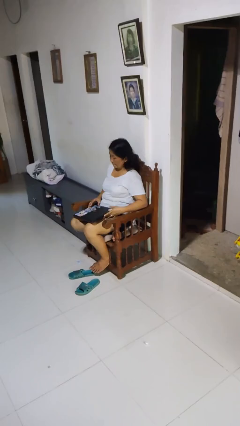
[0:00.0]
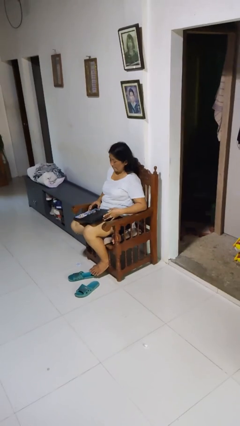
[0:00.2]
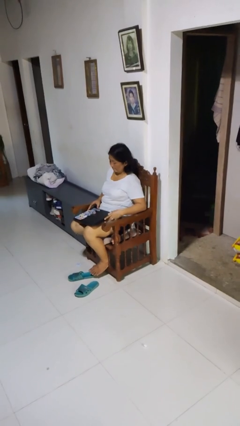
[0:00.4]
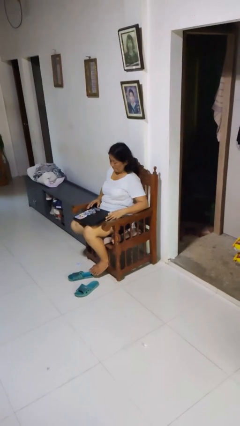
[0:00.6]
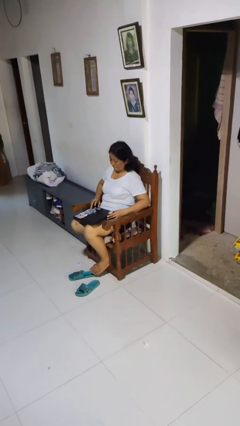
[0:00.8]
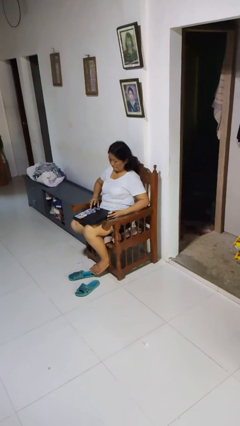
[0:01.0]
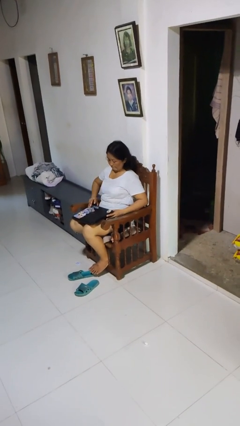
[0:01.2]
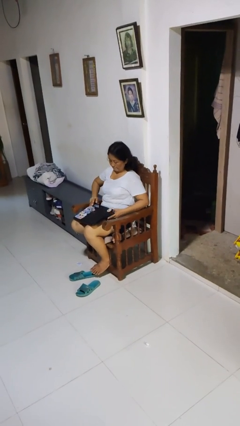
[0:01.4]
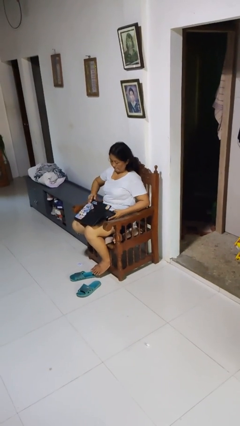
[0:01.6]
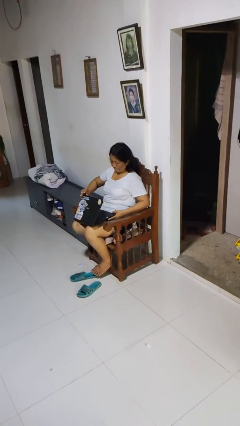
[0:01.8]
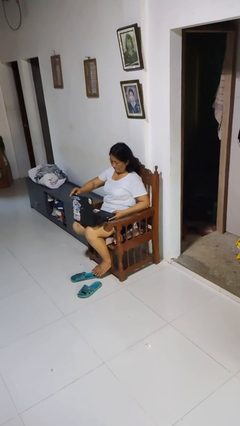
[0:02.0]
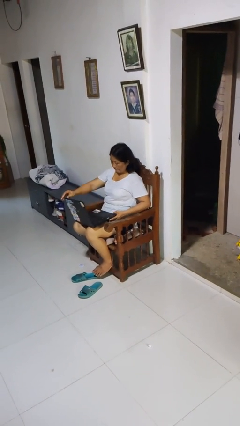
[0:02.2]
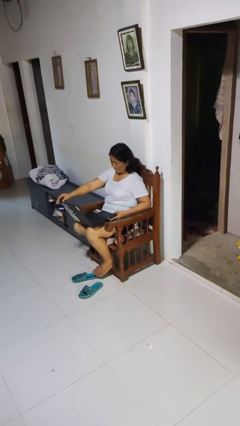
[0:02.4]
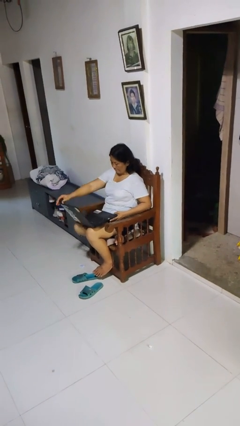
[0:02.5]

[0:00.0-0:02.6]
person opens laptop

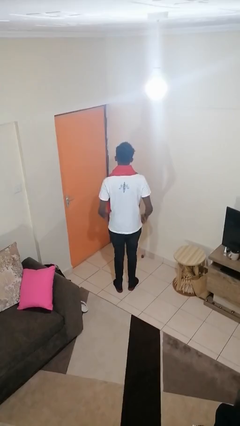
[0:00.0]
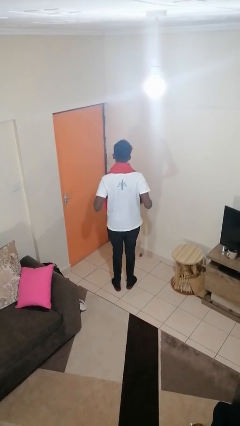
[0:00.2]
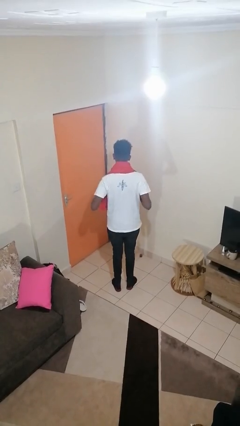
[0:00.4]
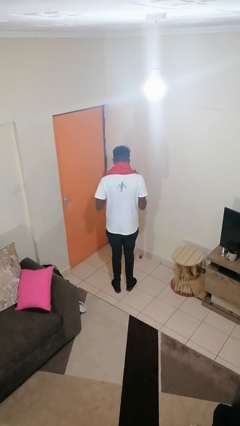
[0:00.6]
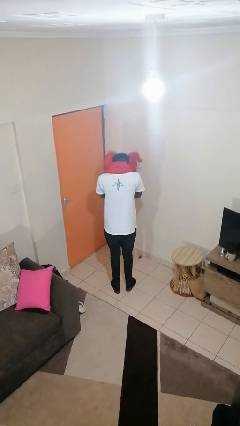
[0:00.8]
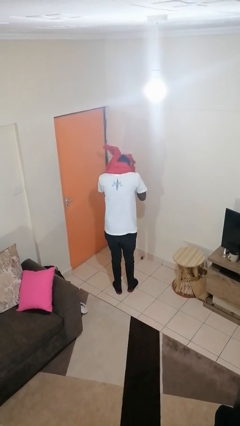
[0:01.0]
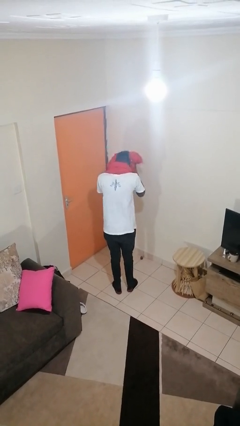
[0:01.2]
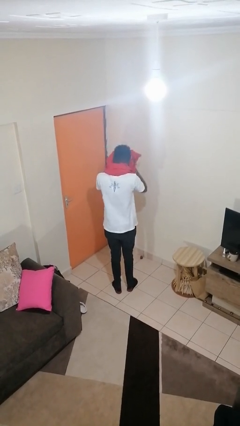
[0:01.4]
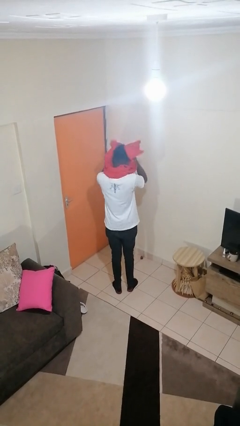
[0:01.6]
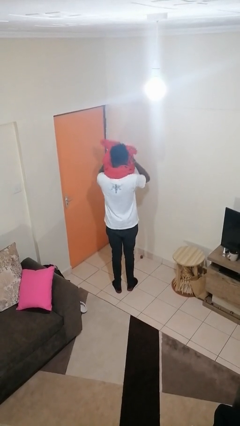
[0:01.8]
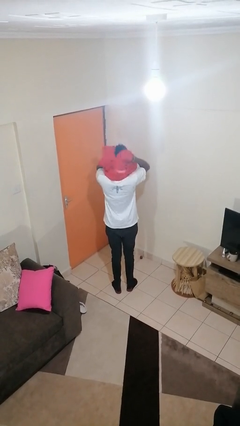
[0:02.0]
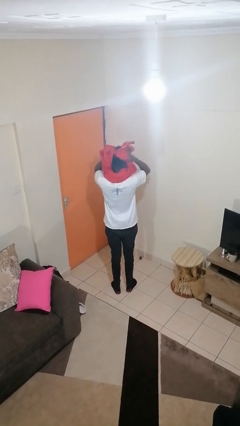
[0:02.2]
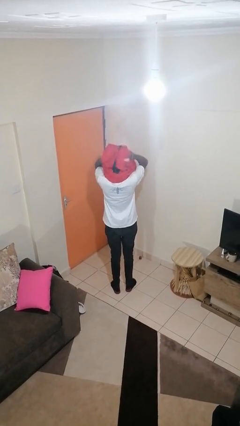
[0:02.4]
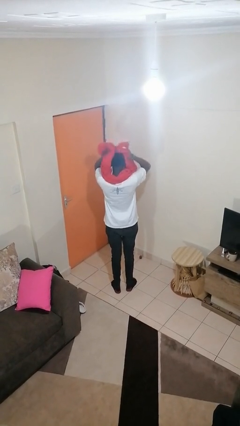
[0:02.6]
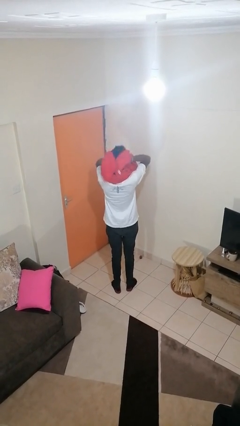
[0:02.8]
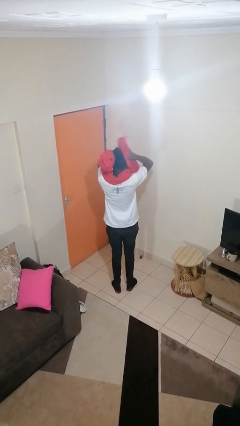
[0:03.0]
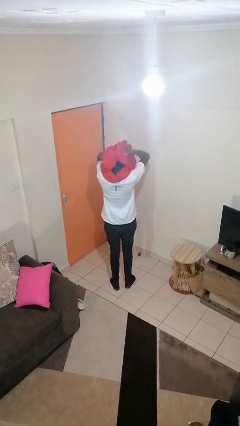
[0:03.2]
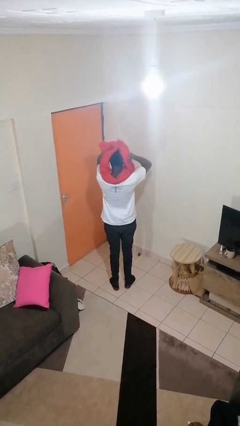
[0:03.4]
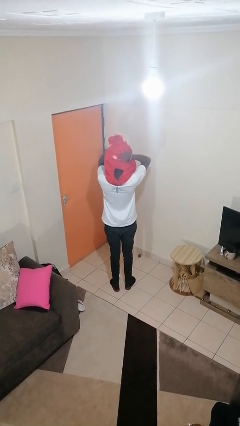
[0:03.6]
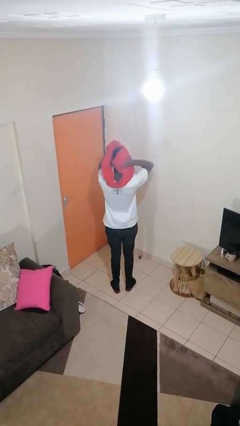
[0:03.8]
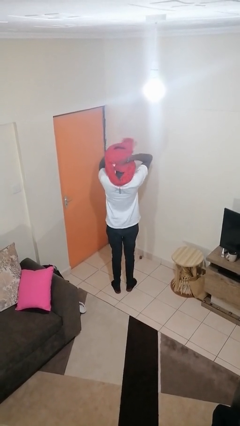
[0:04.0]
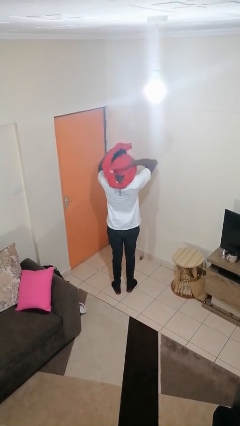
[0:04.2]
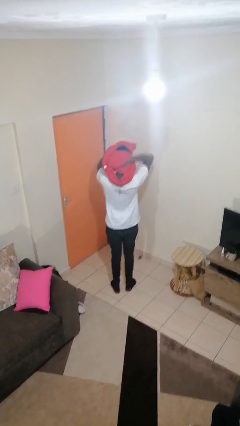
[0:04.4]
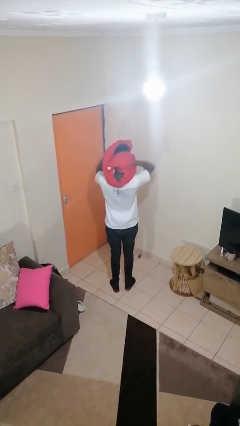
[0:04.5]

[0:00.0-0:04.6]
person dries hair with towel

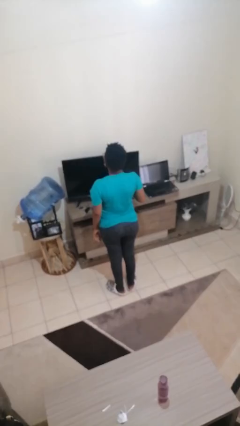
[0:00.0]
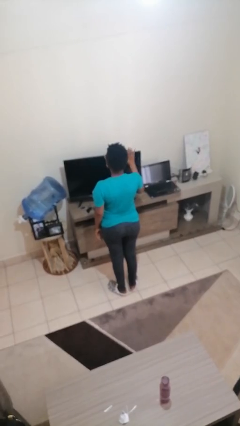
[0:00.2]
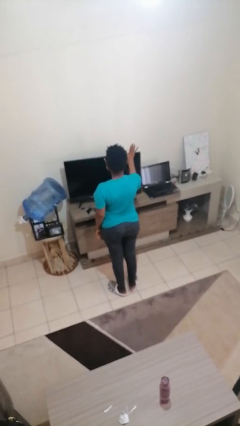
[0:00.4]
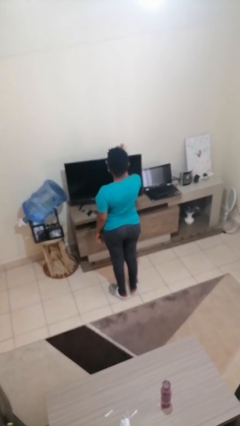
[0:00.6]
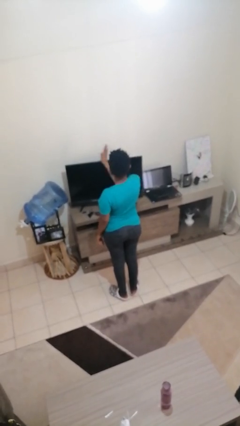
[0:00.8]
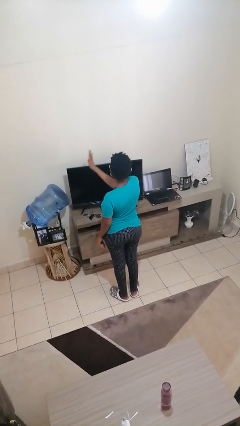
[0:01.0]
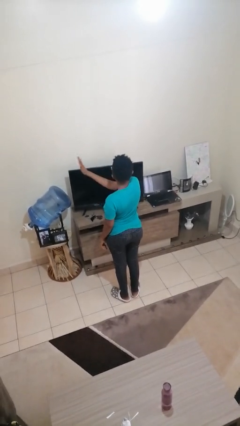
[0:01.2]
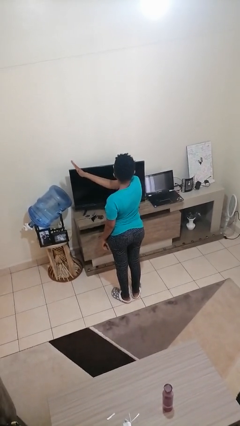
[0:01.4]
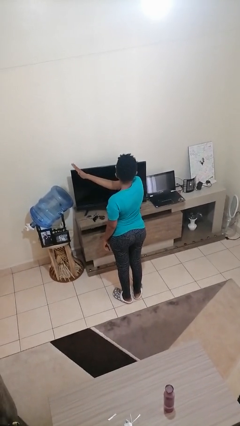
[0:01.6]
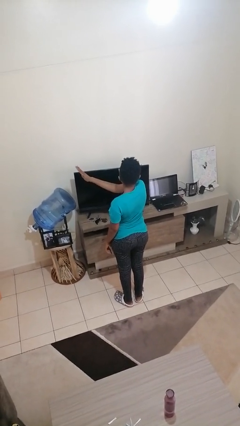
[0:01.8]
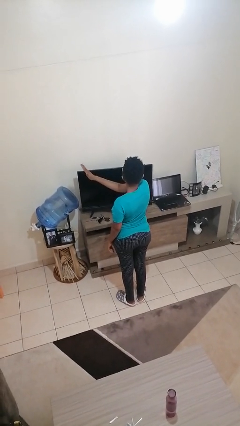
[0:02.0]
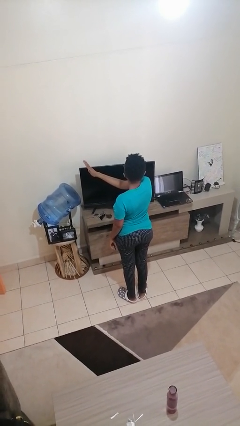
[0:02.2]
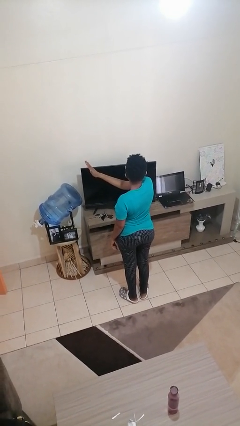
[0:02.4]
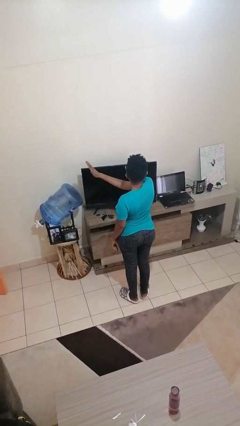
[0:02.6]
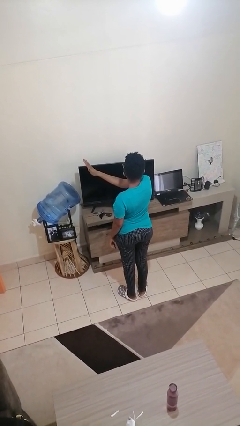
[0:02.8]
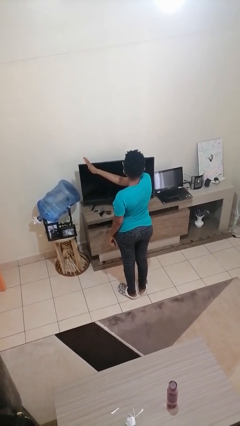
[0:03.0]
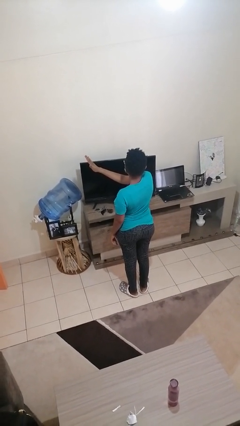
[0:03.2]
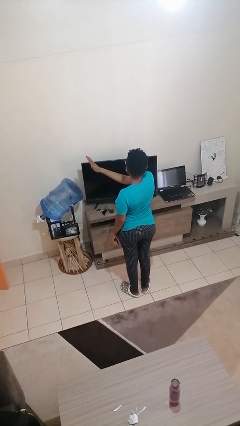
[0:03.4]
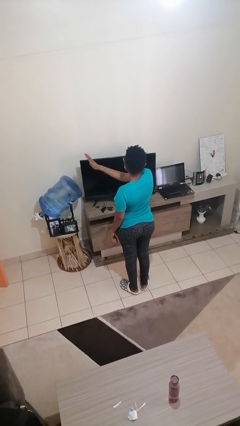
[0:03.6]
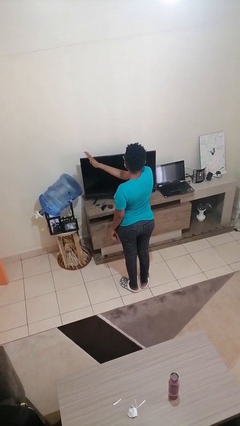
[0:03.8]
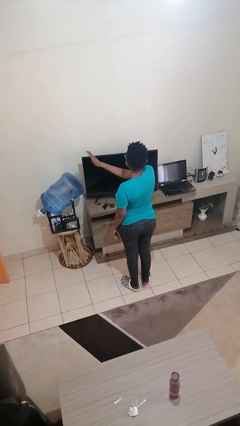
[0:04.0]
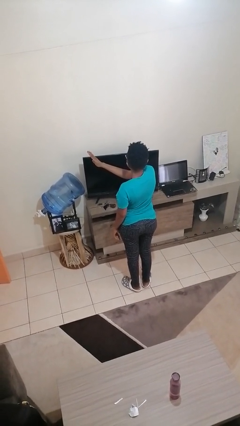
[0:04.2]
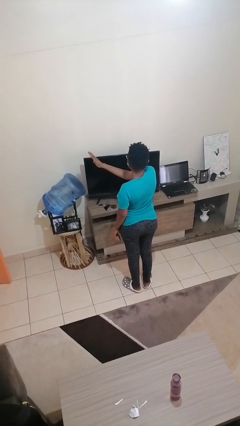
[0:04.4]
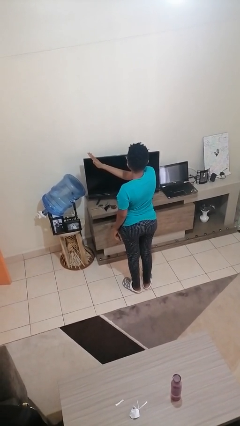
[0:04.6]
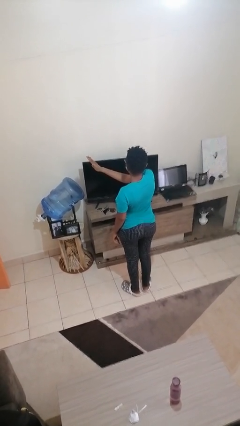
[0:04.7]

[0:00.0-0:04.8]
person gestures swipe left

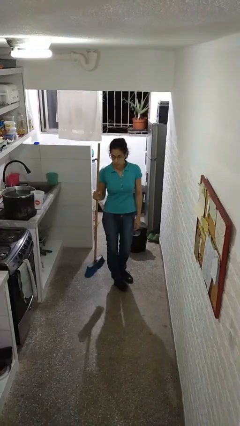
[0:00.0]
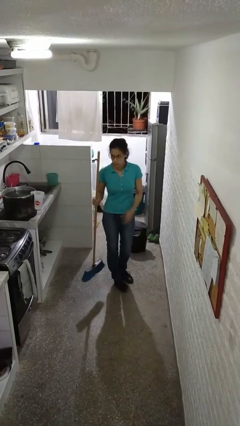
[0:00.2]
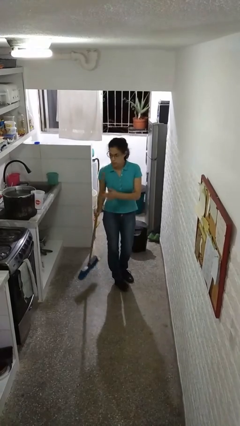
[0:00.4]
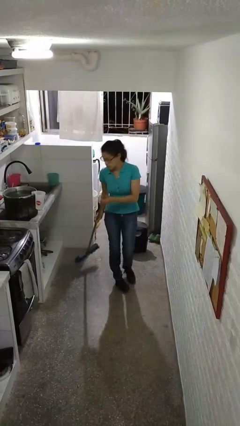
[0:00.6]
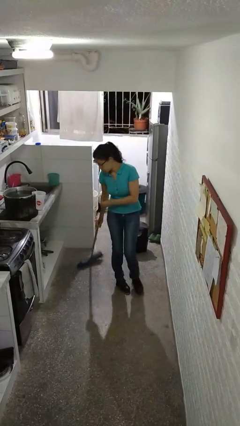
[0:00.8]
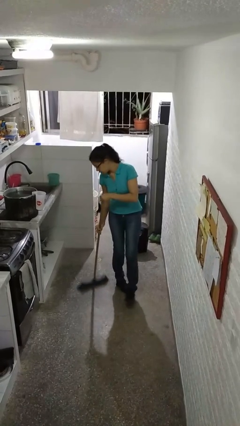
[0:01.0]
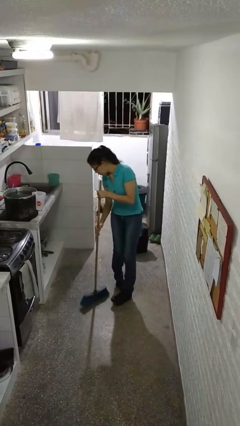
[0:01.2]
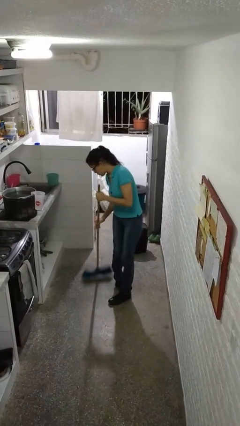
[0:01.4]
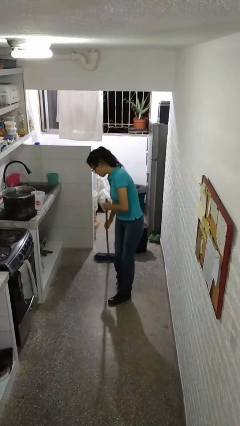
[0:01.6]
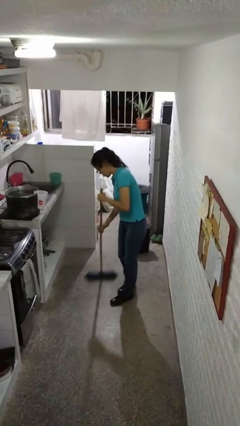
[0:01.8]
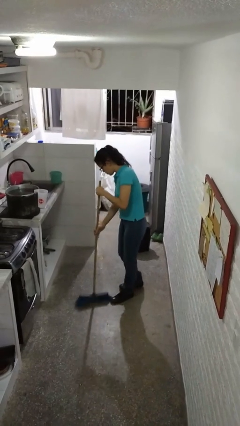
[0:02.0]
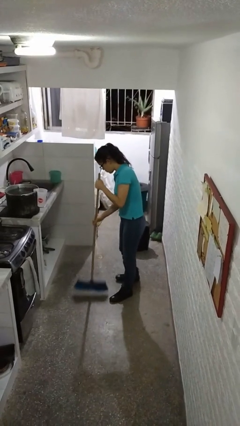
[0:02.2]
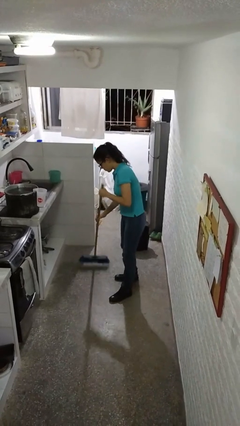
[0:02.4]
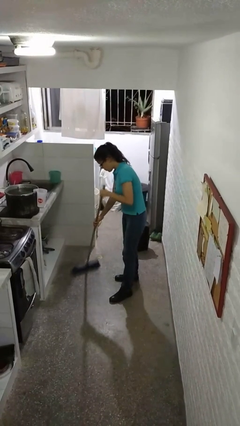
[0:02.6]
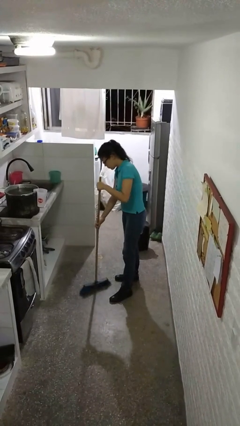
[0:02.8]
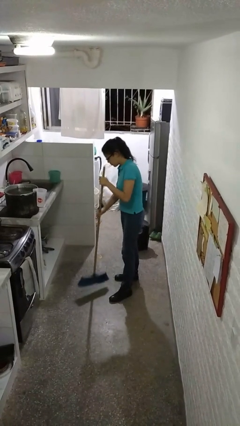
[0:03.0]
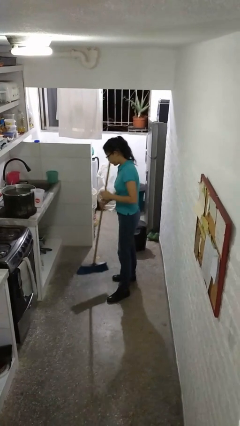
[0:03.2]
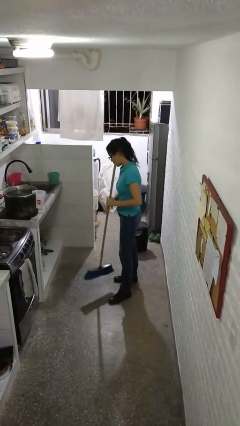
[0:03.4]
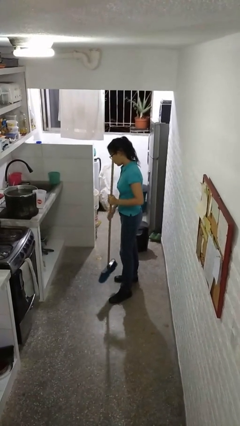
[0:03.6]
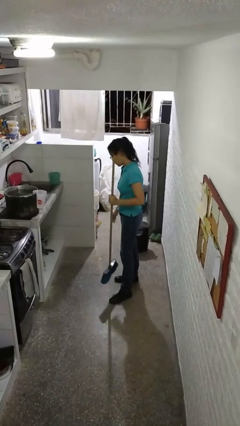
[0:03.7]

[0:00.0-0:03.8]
person sweeps floor

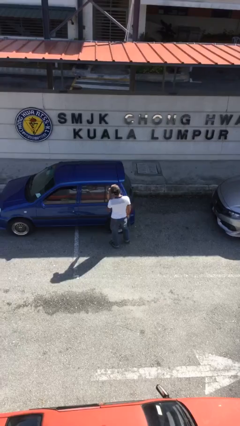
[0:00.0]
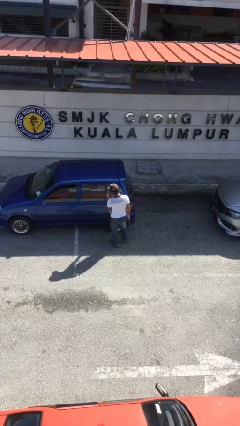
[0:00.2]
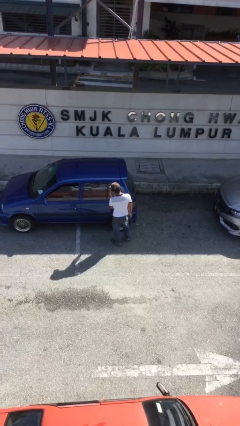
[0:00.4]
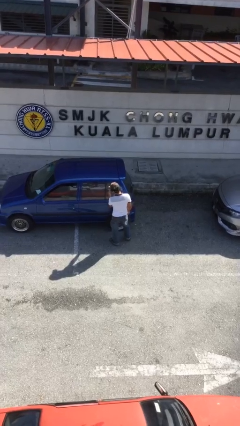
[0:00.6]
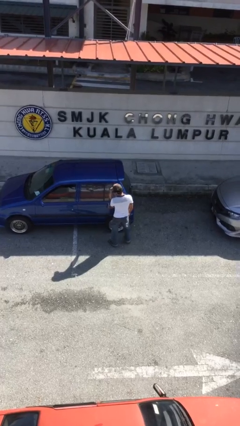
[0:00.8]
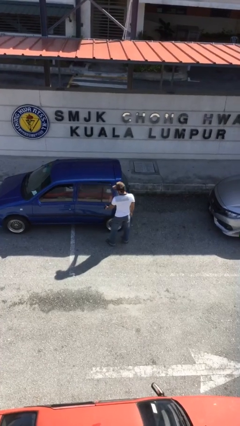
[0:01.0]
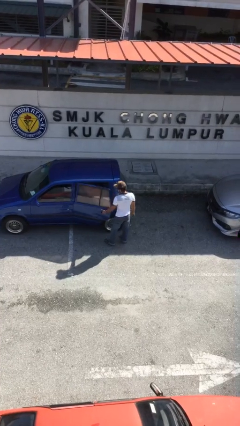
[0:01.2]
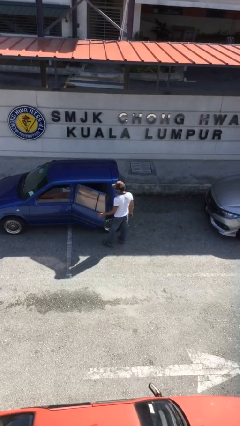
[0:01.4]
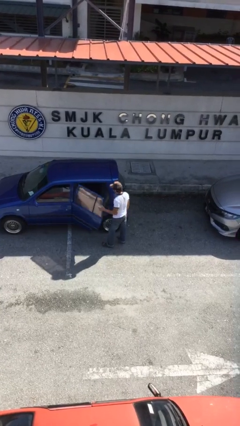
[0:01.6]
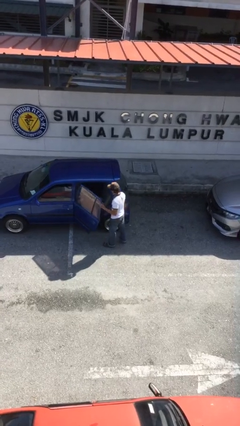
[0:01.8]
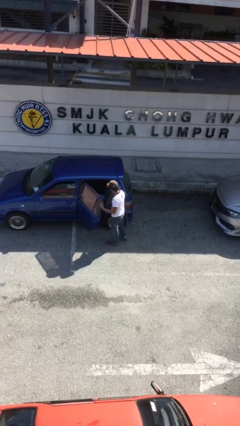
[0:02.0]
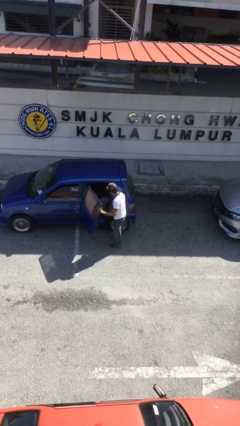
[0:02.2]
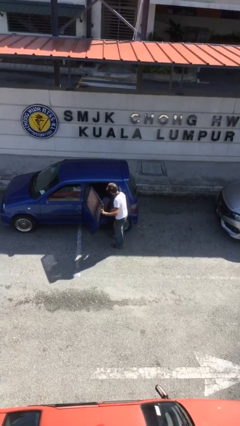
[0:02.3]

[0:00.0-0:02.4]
person opens car door
